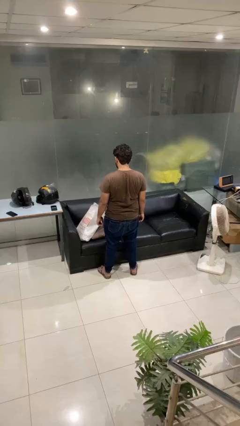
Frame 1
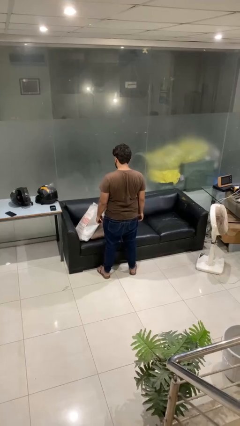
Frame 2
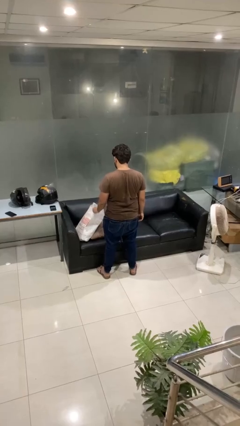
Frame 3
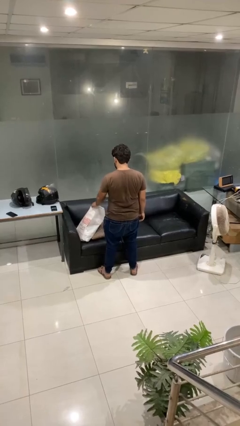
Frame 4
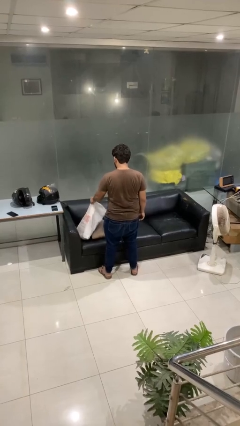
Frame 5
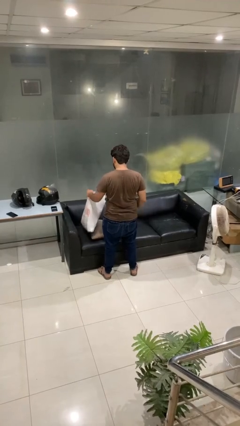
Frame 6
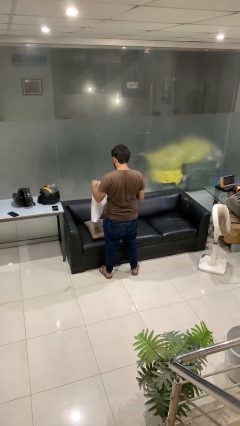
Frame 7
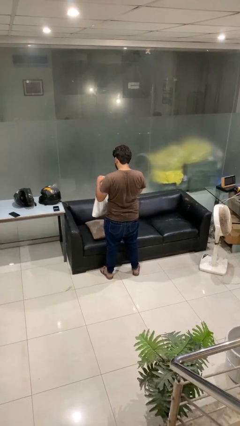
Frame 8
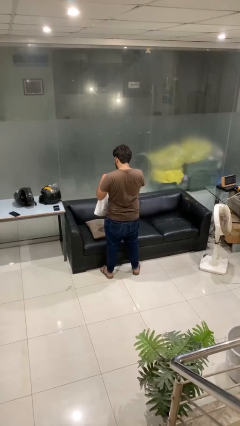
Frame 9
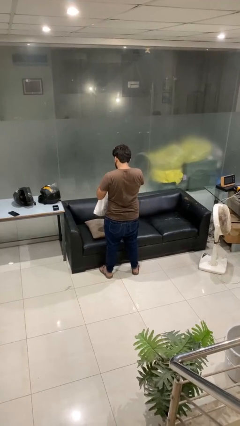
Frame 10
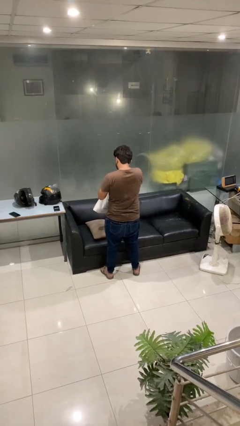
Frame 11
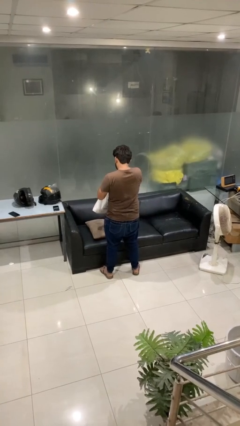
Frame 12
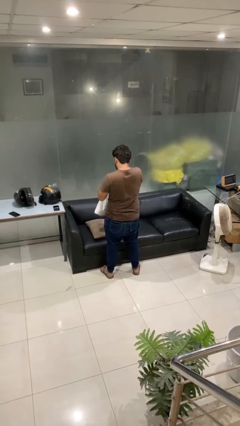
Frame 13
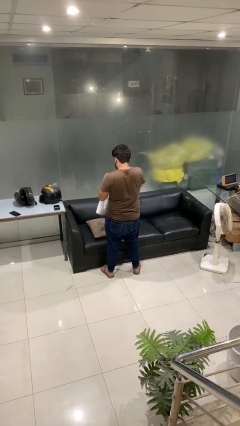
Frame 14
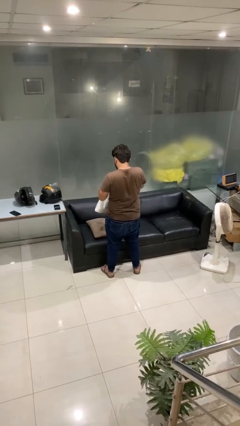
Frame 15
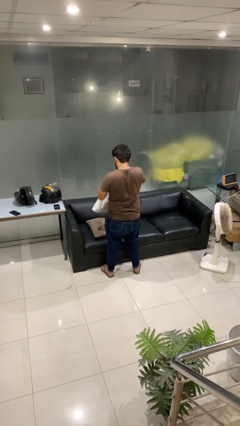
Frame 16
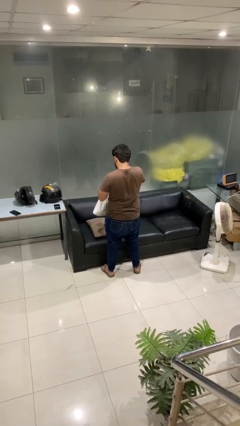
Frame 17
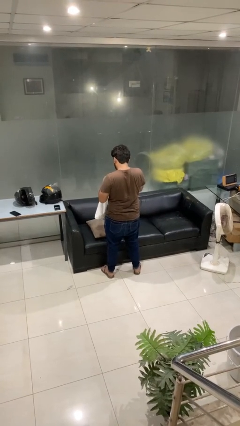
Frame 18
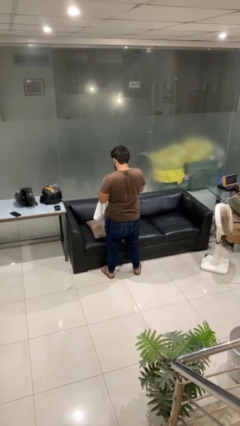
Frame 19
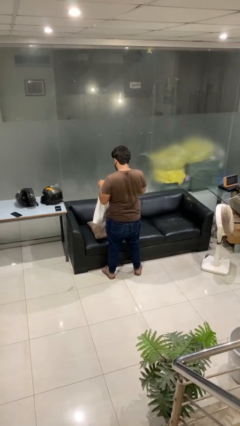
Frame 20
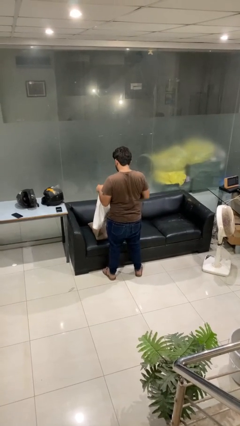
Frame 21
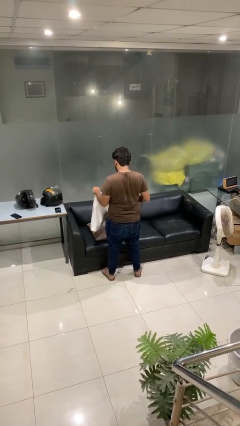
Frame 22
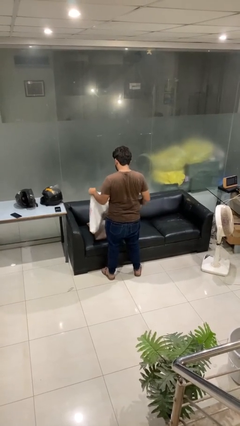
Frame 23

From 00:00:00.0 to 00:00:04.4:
person searches in bag

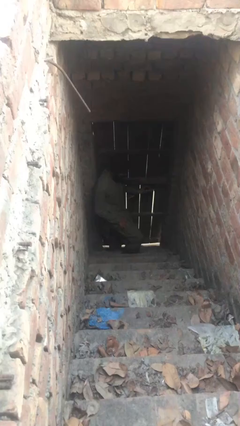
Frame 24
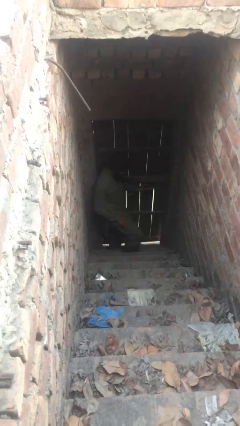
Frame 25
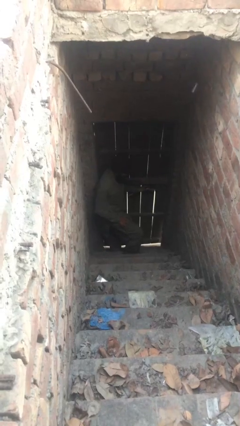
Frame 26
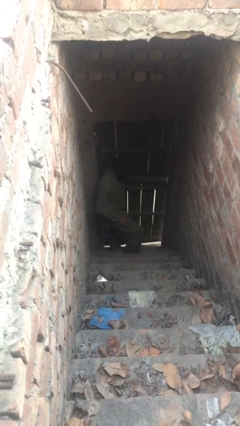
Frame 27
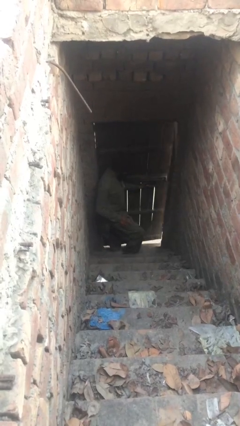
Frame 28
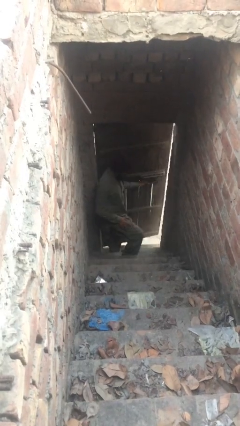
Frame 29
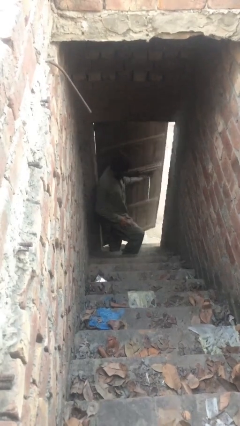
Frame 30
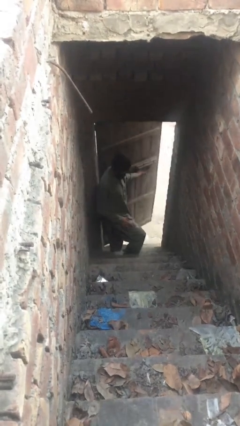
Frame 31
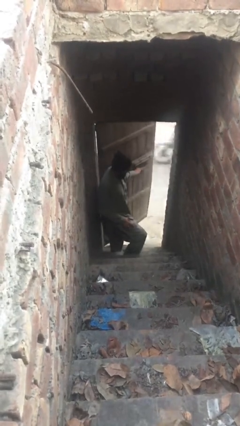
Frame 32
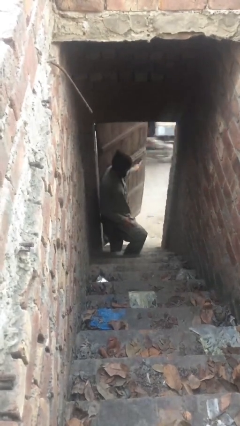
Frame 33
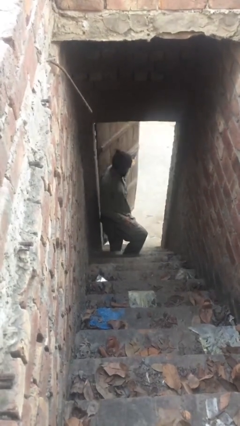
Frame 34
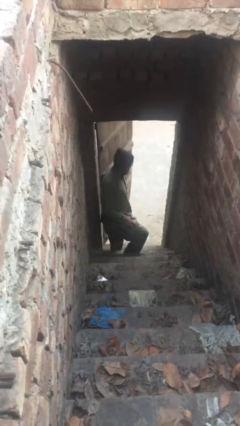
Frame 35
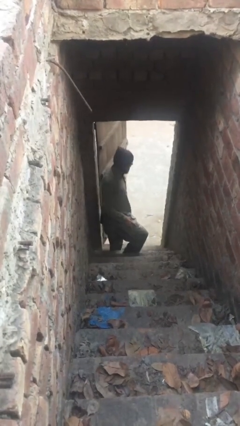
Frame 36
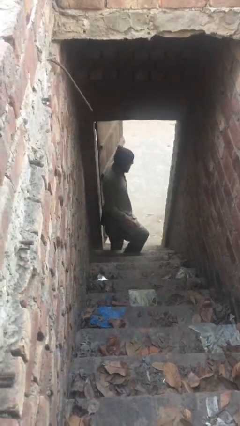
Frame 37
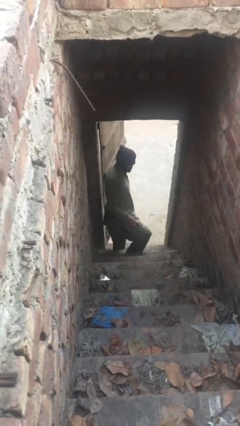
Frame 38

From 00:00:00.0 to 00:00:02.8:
person opens facility door

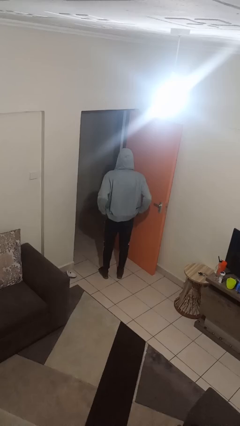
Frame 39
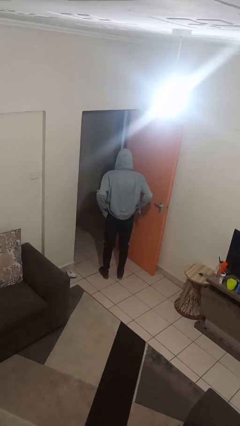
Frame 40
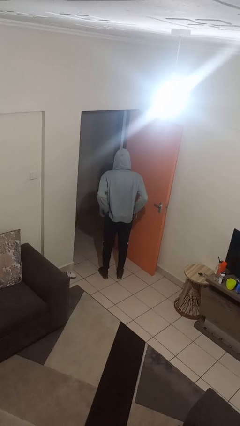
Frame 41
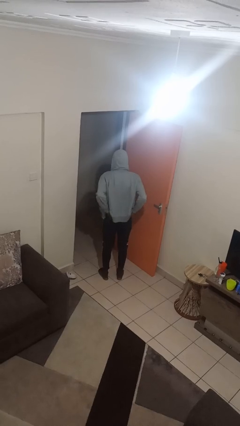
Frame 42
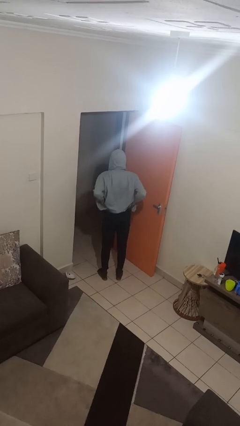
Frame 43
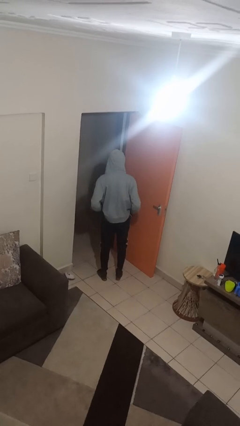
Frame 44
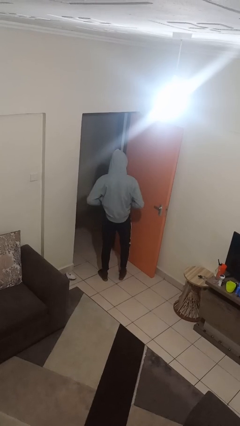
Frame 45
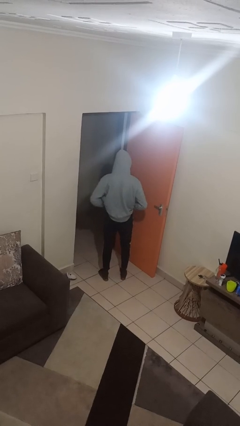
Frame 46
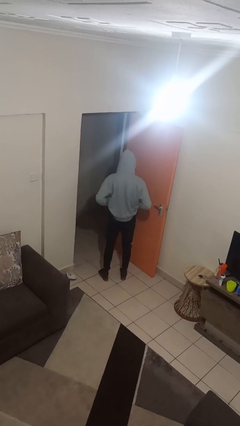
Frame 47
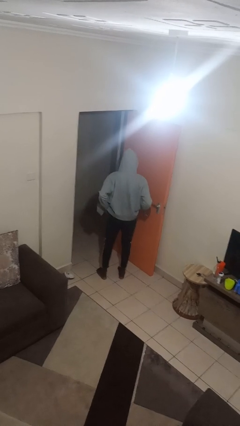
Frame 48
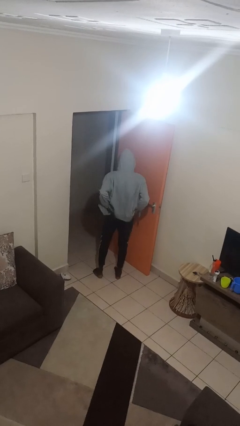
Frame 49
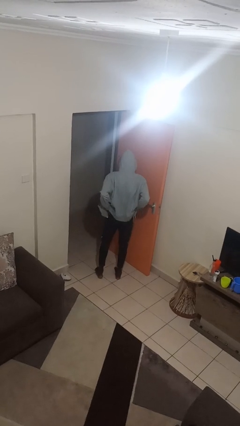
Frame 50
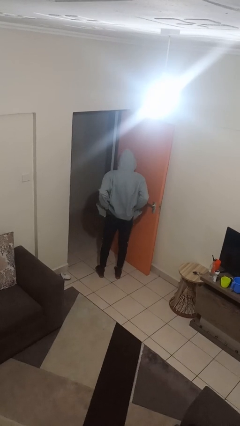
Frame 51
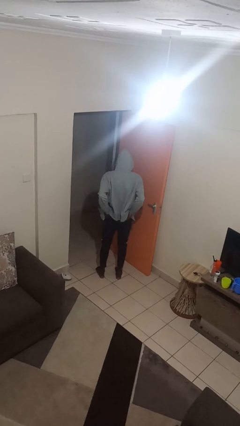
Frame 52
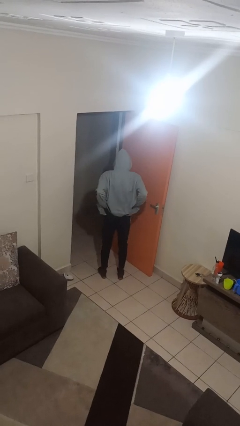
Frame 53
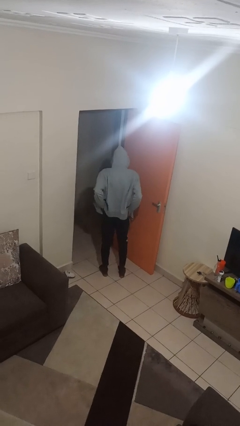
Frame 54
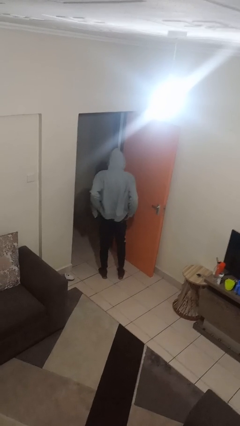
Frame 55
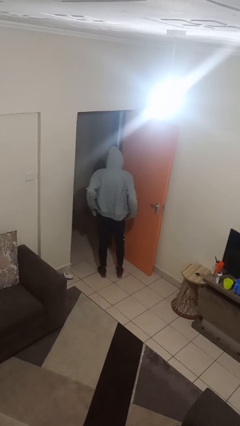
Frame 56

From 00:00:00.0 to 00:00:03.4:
person hikes up pants

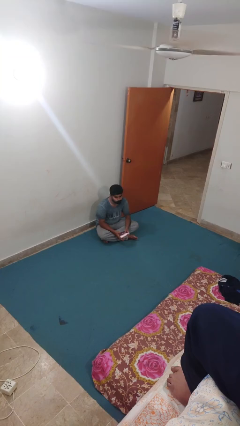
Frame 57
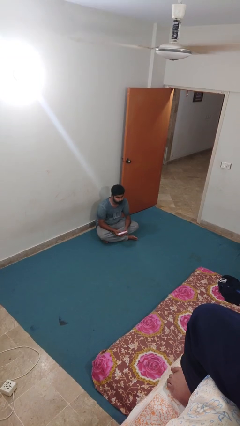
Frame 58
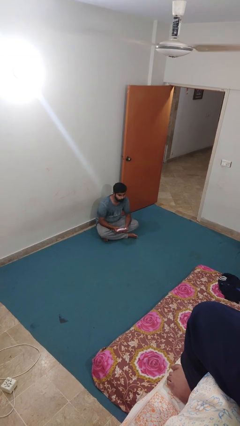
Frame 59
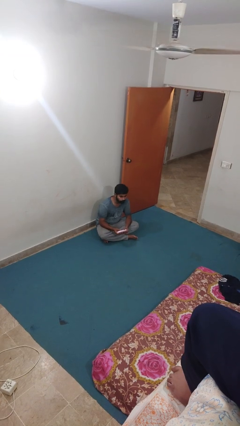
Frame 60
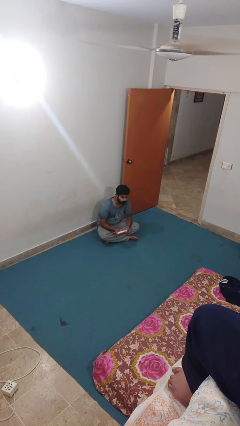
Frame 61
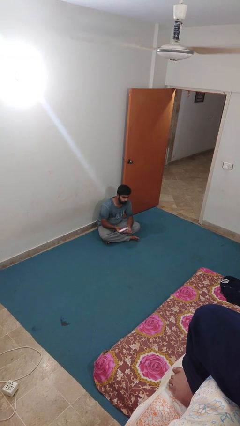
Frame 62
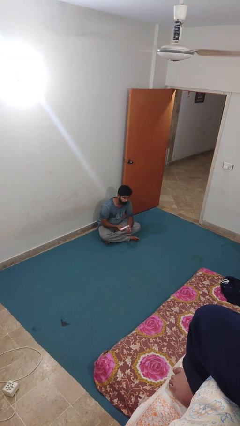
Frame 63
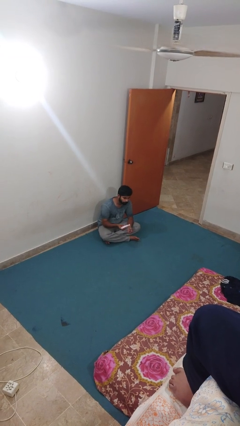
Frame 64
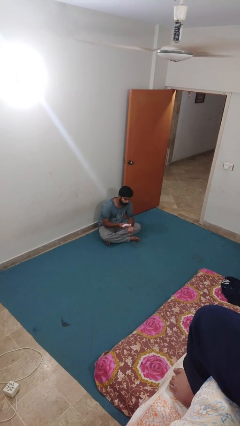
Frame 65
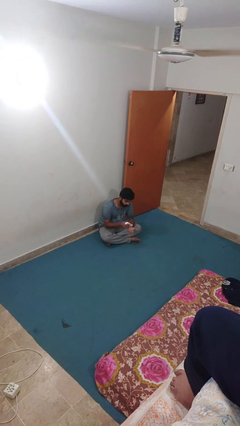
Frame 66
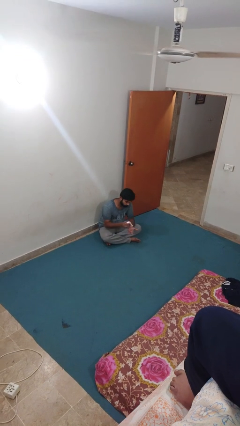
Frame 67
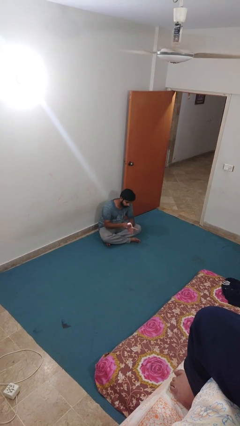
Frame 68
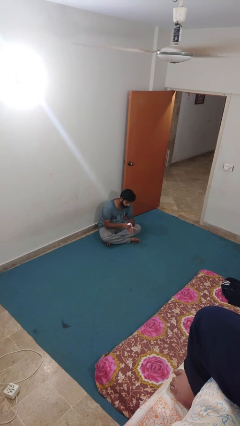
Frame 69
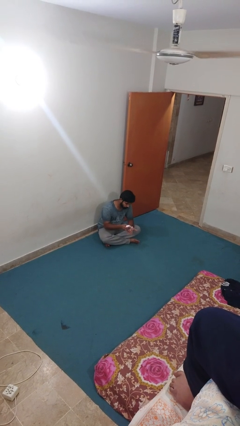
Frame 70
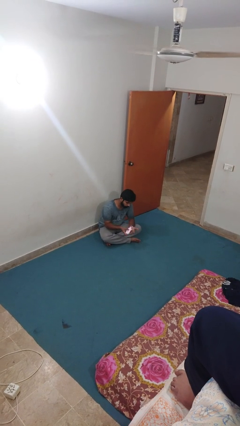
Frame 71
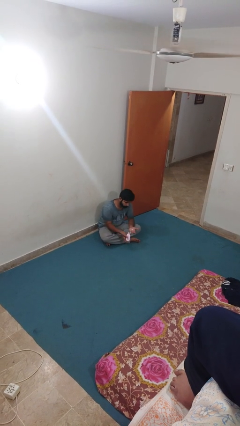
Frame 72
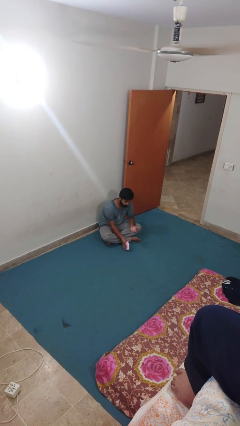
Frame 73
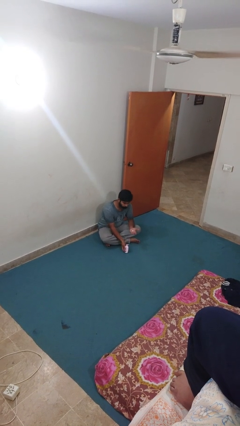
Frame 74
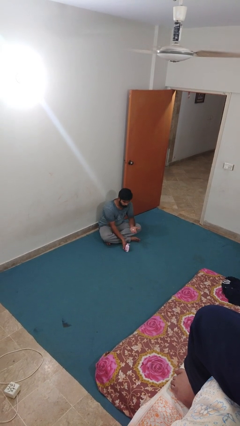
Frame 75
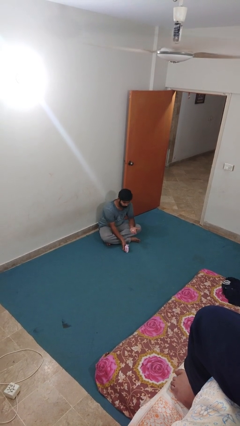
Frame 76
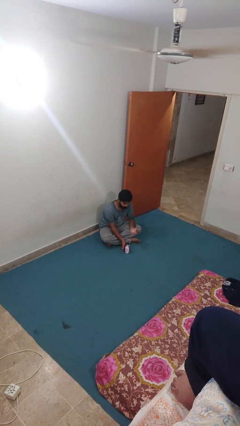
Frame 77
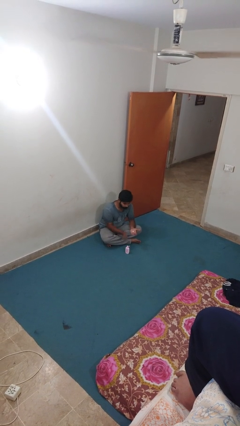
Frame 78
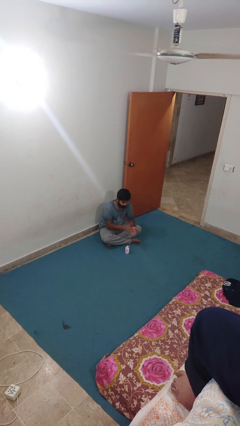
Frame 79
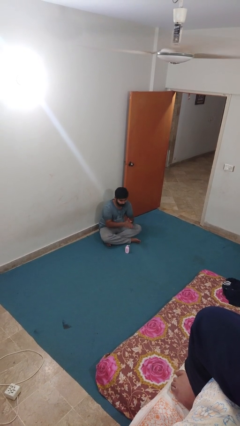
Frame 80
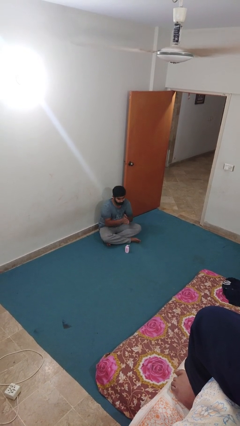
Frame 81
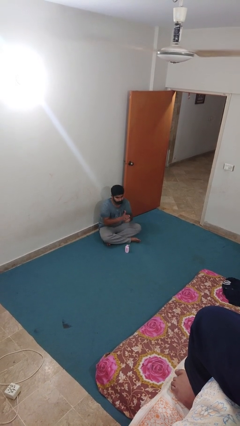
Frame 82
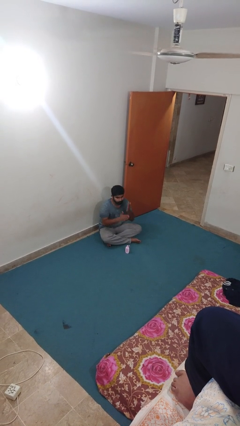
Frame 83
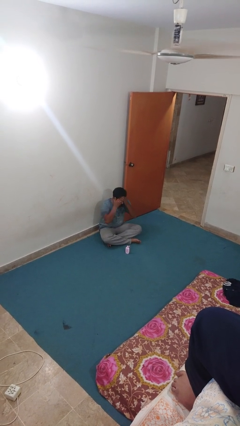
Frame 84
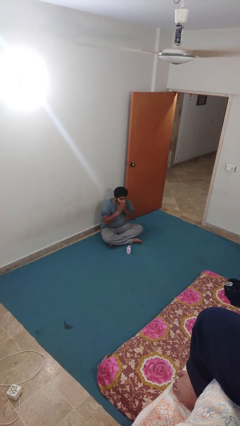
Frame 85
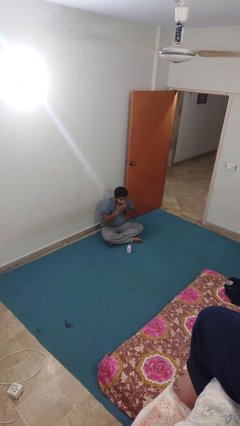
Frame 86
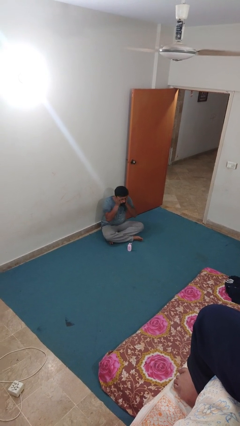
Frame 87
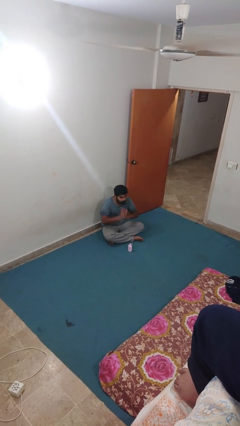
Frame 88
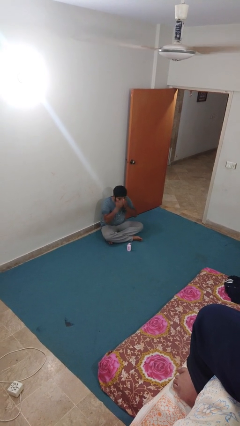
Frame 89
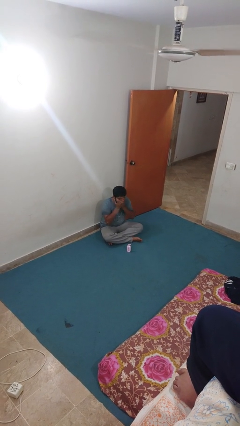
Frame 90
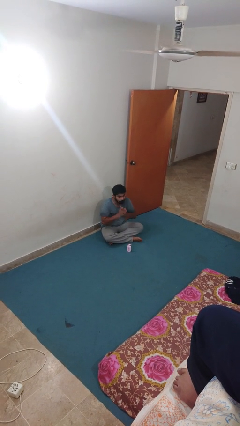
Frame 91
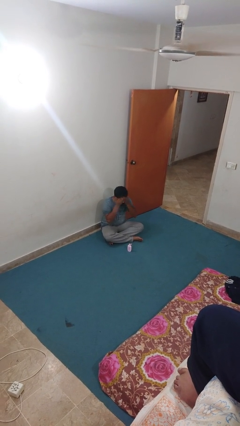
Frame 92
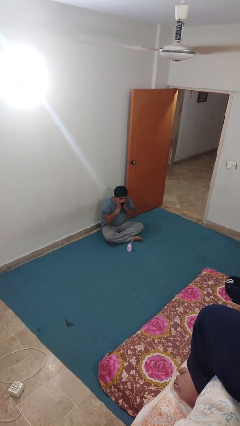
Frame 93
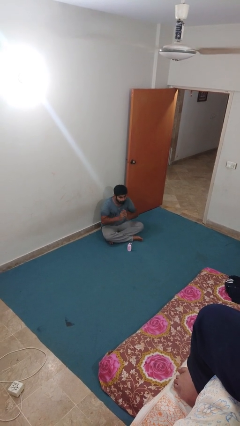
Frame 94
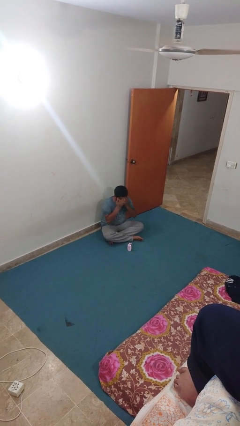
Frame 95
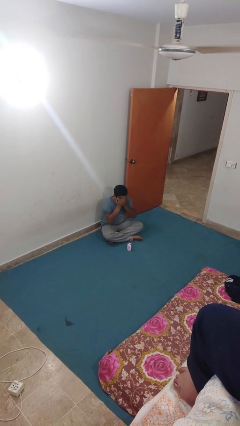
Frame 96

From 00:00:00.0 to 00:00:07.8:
person applies facial moisturizer
